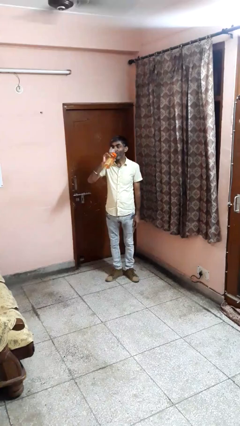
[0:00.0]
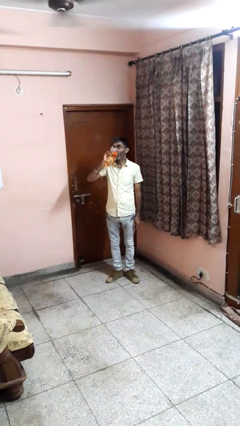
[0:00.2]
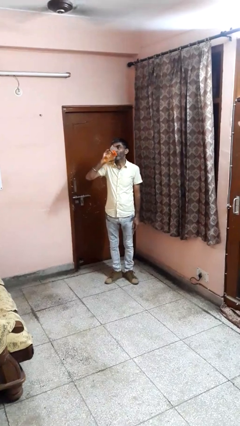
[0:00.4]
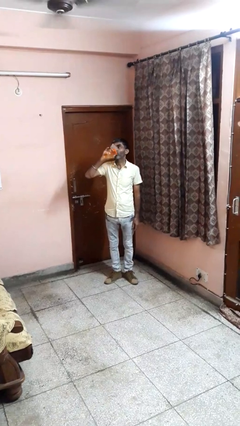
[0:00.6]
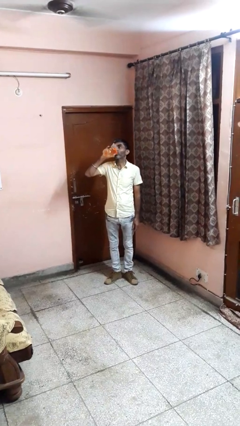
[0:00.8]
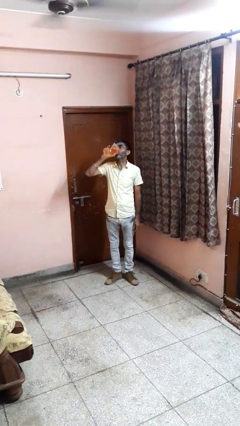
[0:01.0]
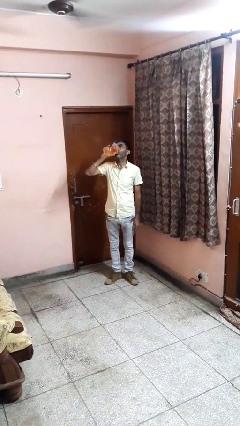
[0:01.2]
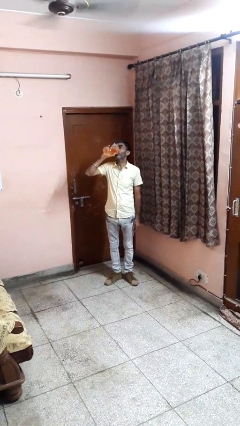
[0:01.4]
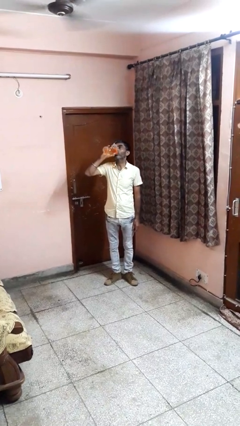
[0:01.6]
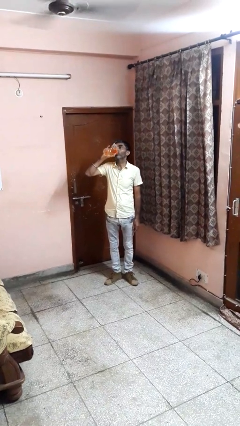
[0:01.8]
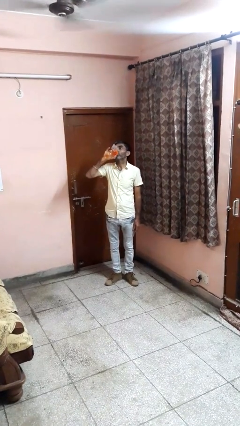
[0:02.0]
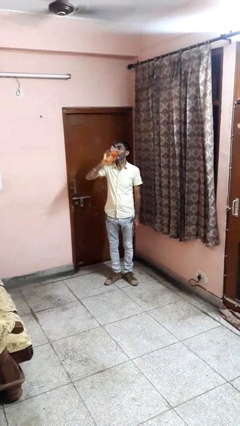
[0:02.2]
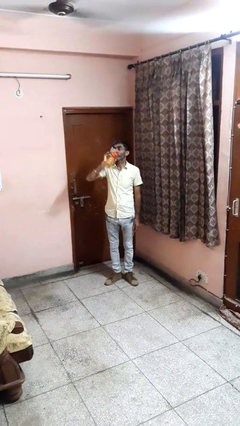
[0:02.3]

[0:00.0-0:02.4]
person drinks from bottle

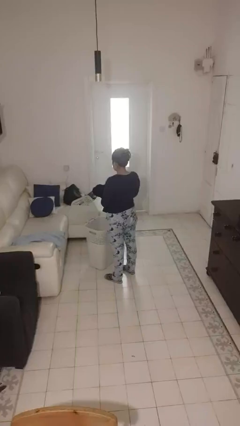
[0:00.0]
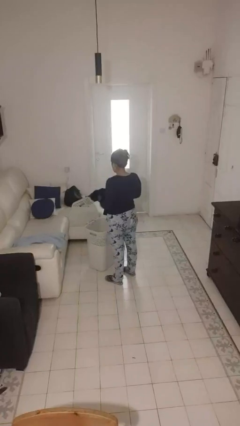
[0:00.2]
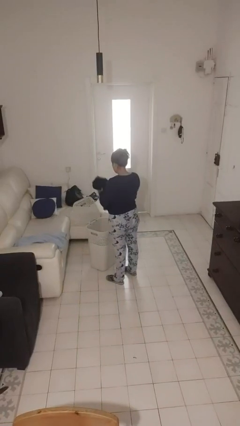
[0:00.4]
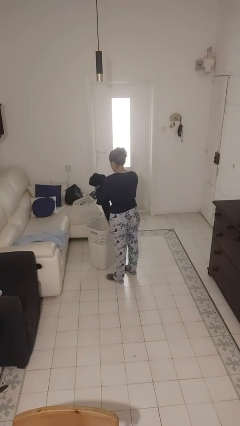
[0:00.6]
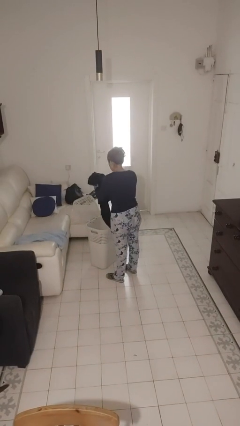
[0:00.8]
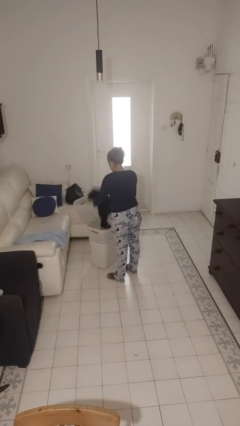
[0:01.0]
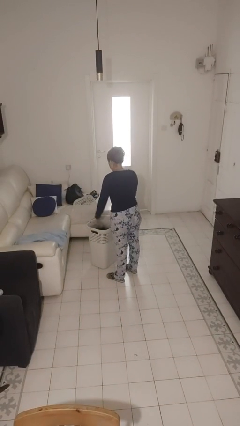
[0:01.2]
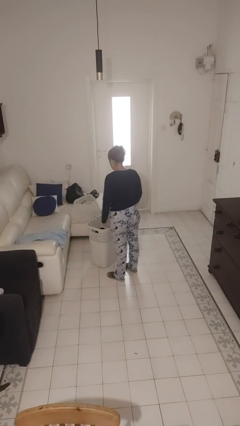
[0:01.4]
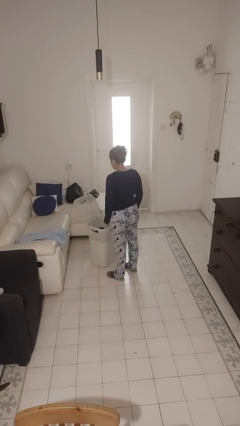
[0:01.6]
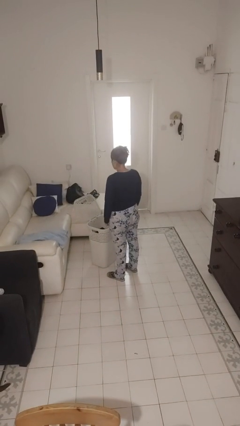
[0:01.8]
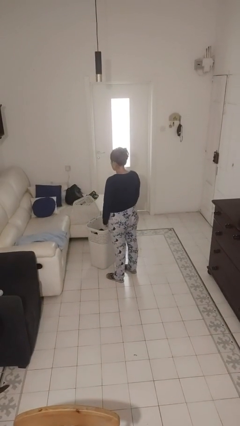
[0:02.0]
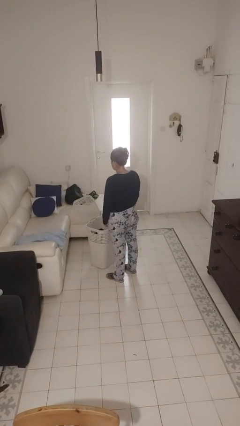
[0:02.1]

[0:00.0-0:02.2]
person puts object into basket

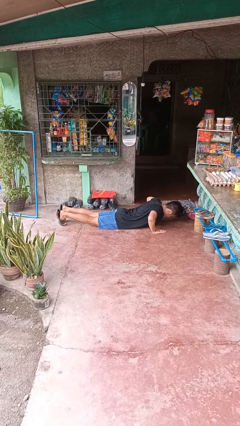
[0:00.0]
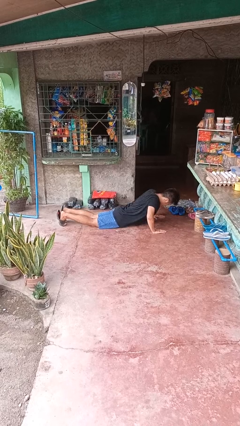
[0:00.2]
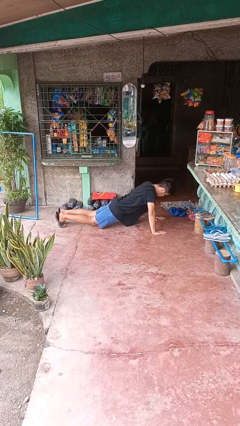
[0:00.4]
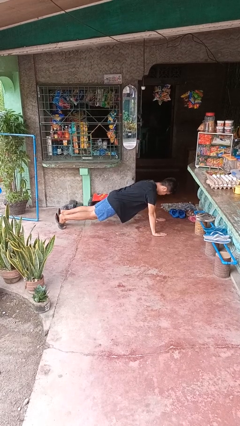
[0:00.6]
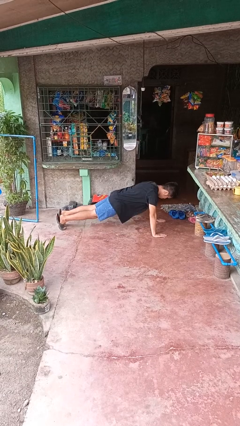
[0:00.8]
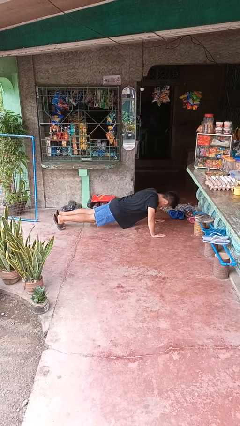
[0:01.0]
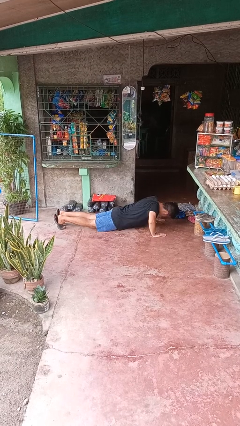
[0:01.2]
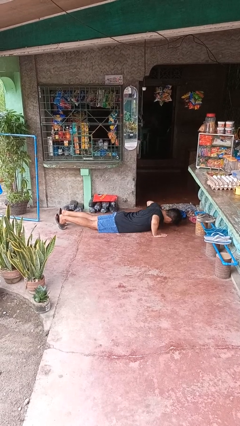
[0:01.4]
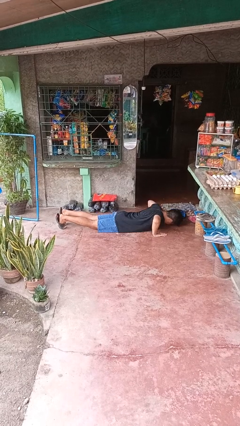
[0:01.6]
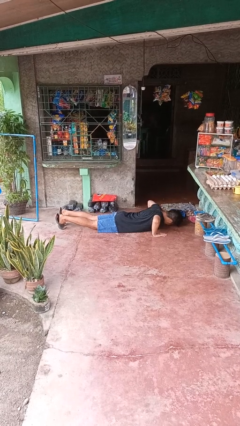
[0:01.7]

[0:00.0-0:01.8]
person exercises with pushup

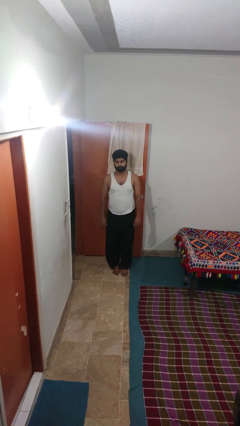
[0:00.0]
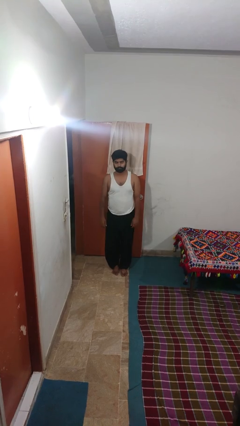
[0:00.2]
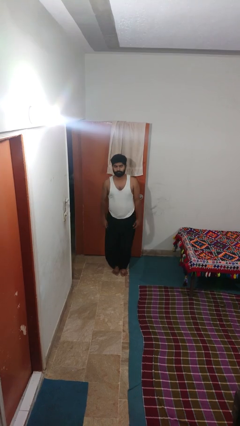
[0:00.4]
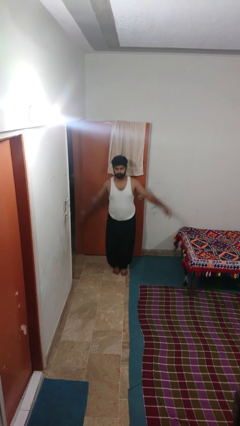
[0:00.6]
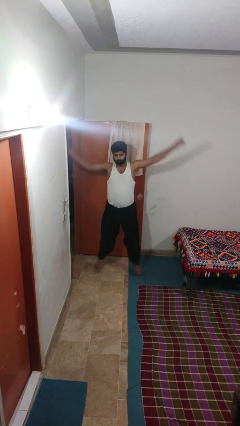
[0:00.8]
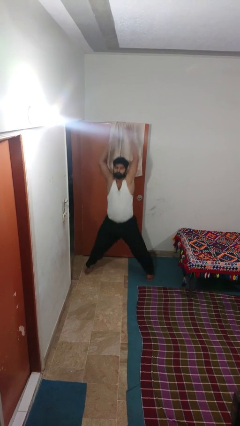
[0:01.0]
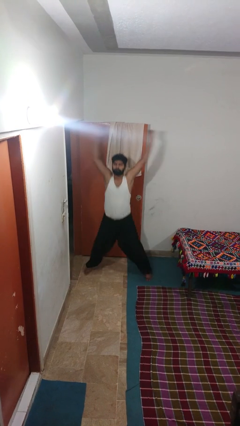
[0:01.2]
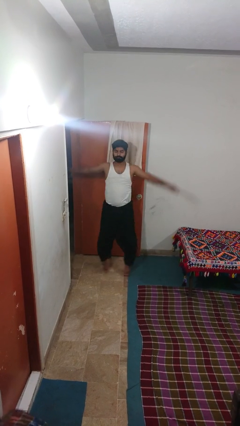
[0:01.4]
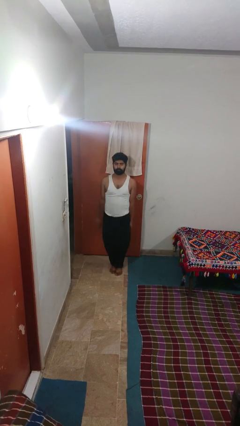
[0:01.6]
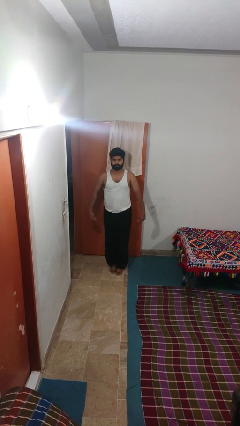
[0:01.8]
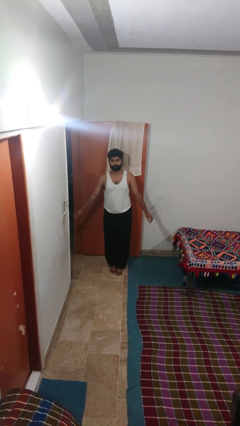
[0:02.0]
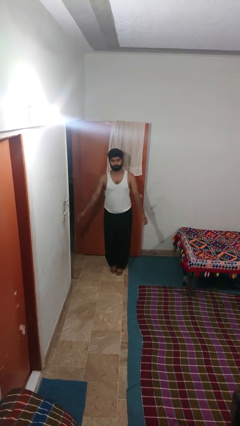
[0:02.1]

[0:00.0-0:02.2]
person exercises with jumping jacks

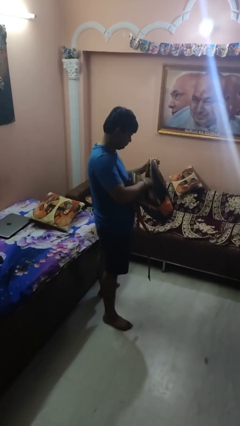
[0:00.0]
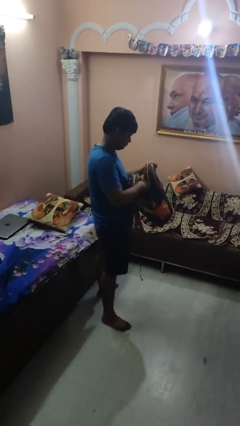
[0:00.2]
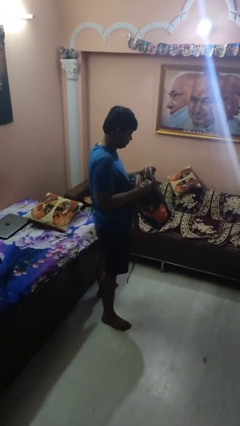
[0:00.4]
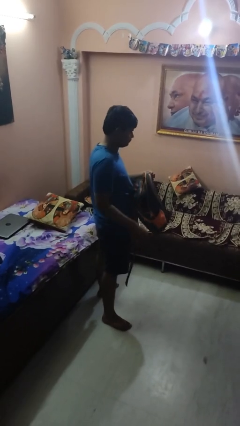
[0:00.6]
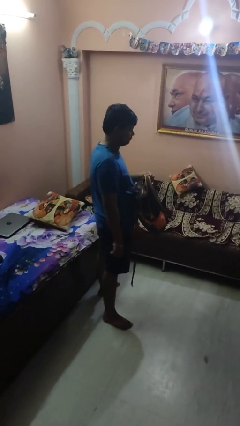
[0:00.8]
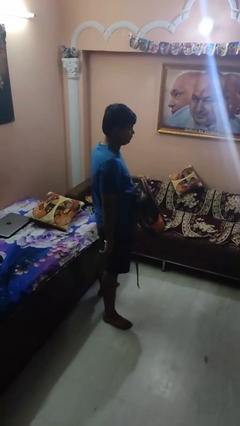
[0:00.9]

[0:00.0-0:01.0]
person puts object into backpack

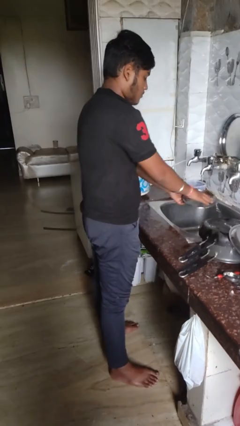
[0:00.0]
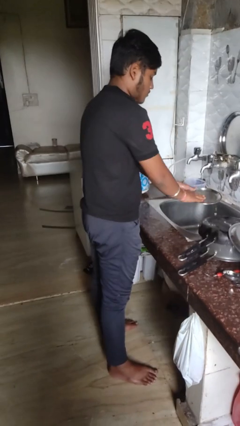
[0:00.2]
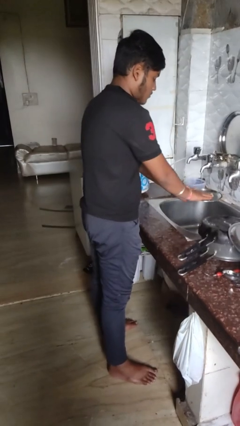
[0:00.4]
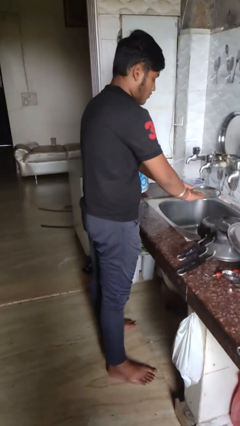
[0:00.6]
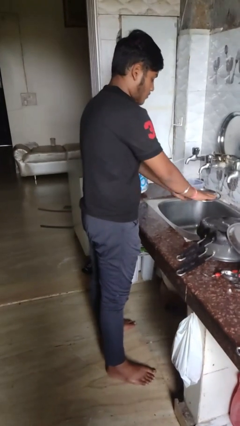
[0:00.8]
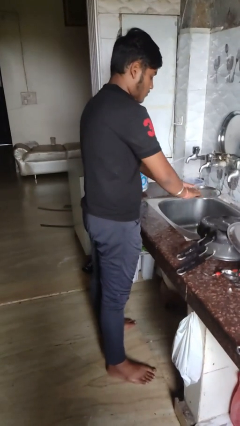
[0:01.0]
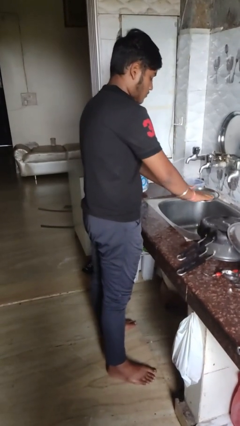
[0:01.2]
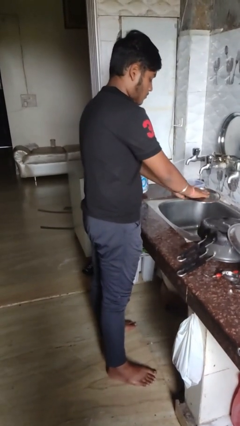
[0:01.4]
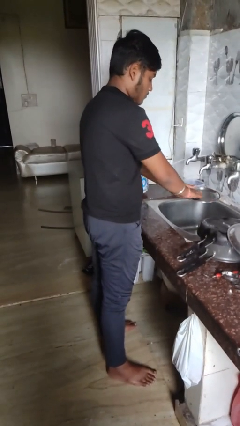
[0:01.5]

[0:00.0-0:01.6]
person washes dish

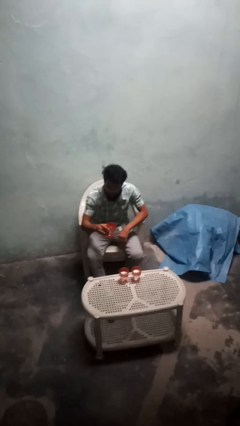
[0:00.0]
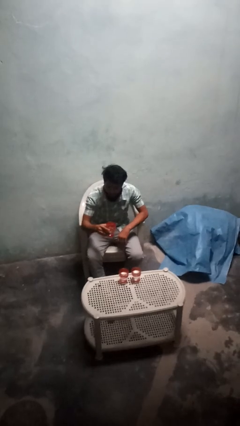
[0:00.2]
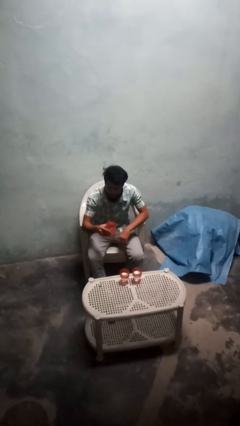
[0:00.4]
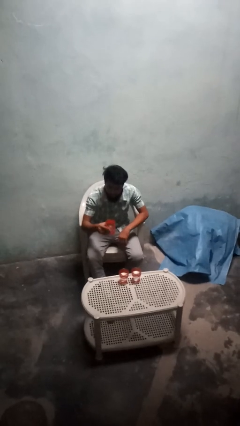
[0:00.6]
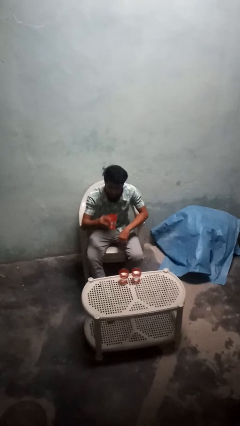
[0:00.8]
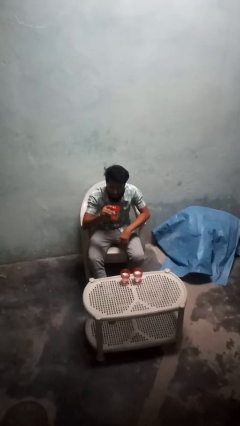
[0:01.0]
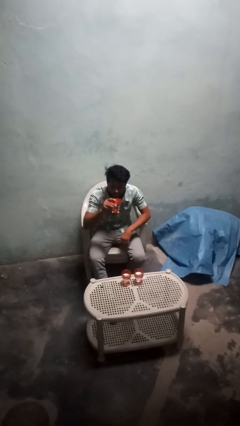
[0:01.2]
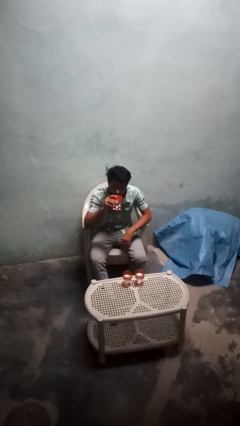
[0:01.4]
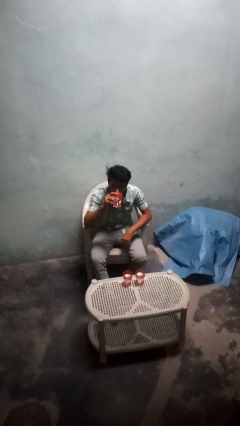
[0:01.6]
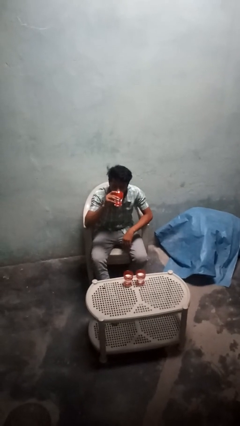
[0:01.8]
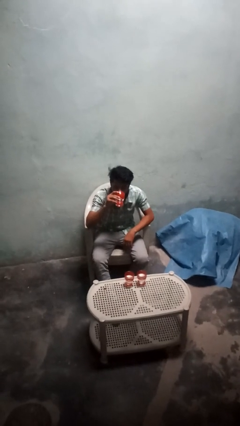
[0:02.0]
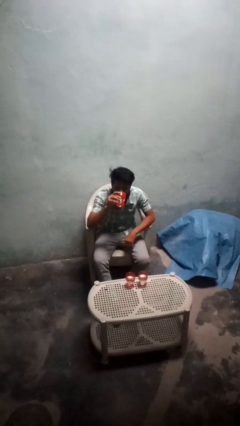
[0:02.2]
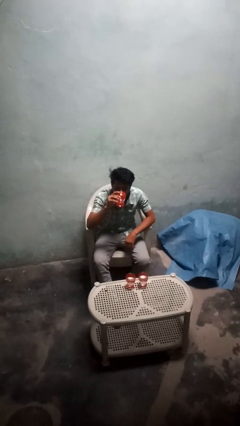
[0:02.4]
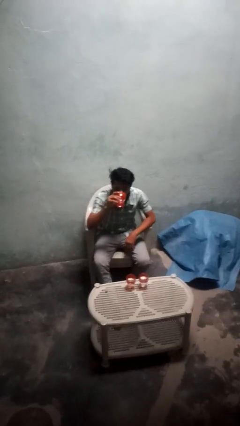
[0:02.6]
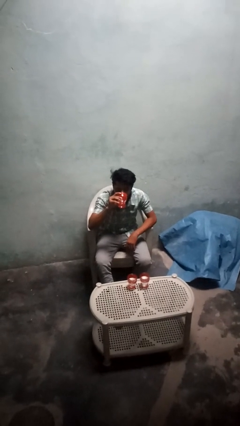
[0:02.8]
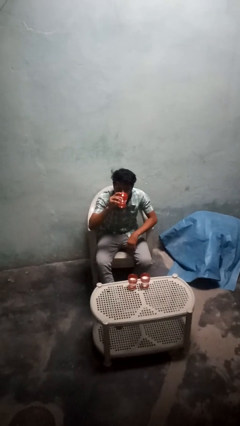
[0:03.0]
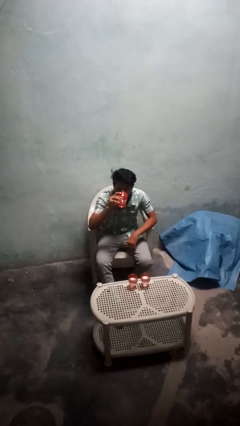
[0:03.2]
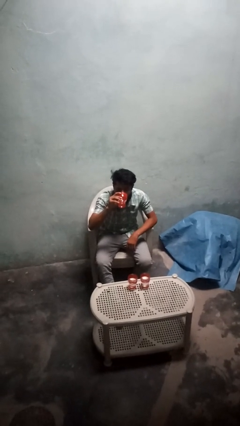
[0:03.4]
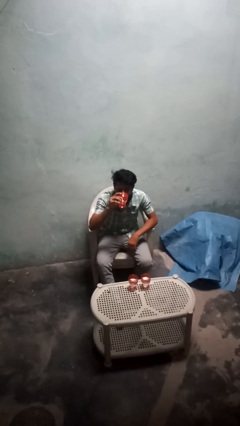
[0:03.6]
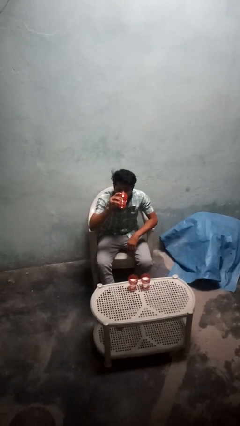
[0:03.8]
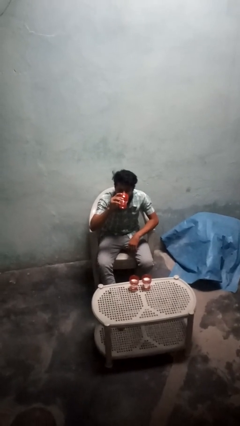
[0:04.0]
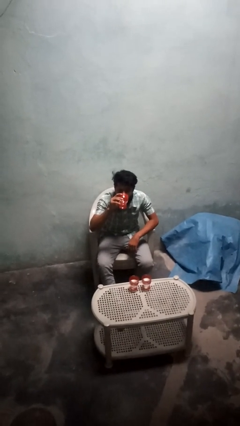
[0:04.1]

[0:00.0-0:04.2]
person drinks from shotglass

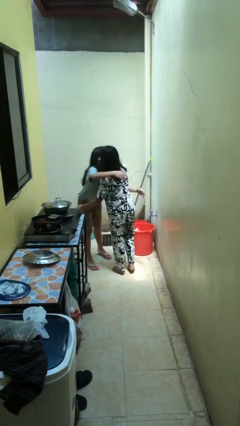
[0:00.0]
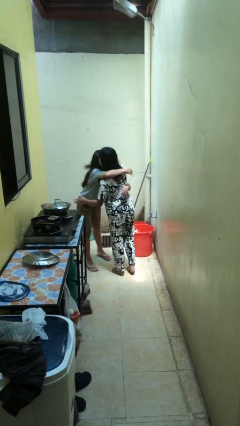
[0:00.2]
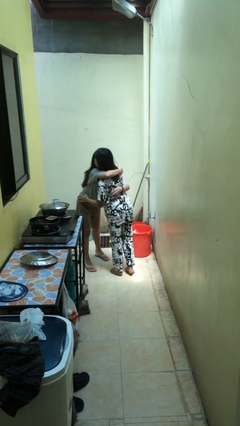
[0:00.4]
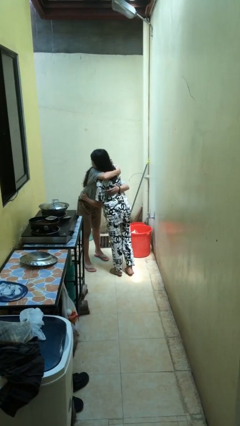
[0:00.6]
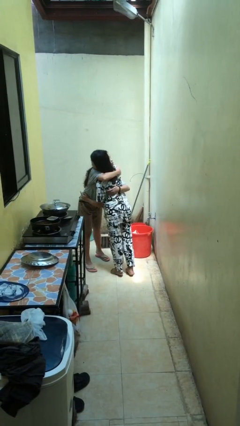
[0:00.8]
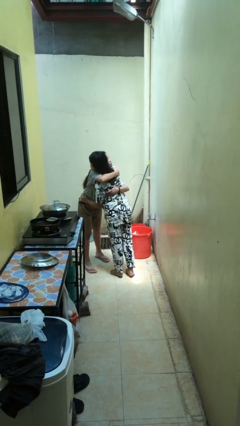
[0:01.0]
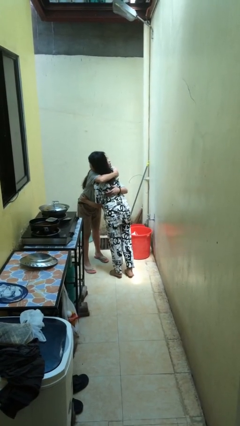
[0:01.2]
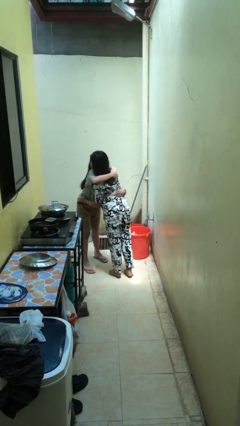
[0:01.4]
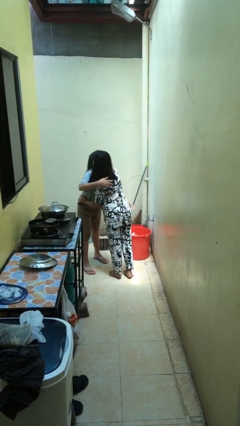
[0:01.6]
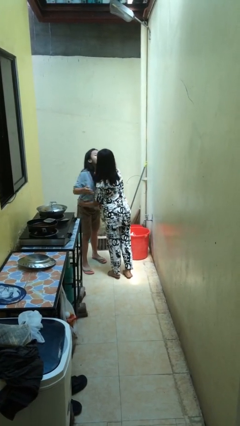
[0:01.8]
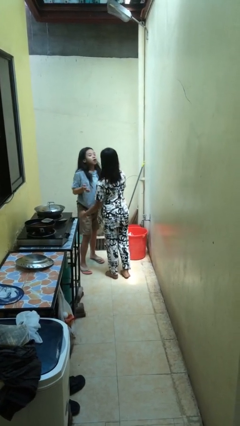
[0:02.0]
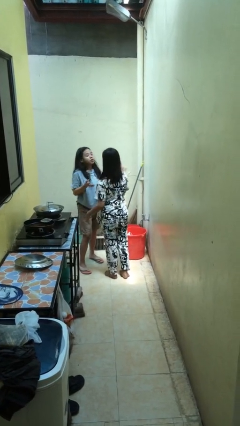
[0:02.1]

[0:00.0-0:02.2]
person embraces person
